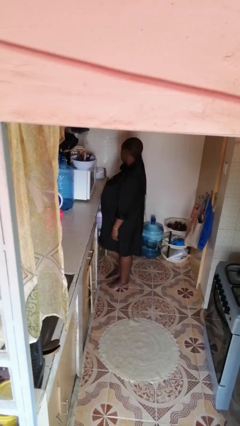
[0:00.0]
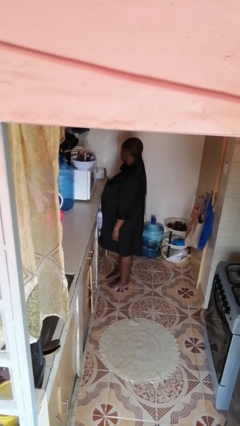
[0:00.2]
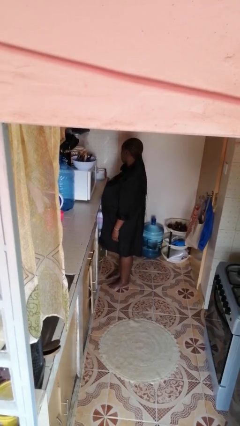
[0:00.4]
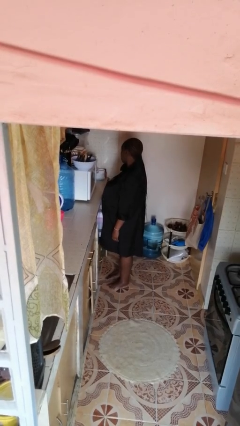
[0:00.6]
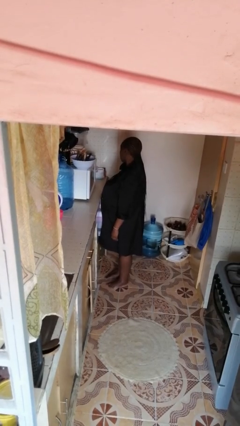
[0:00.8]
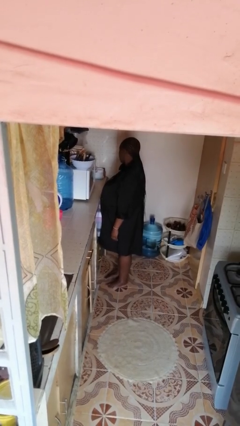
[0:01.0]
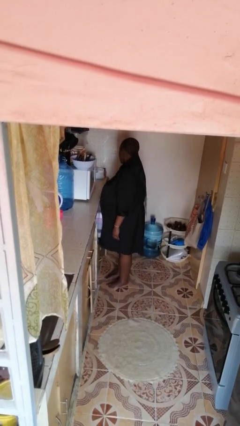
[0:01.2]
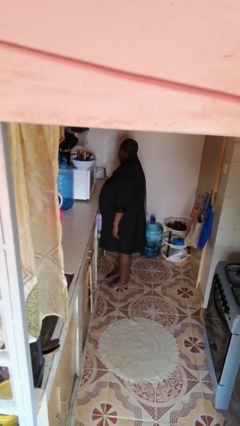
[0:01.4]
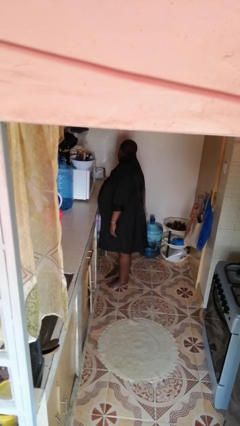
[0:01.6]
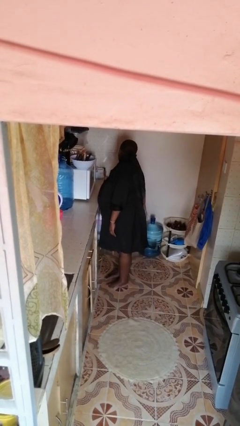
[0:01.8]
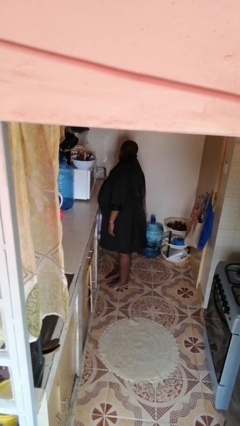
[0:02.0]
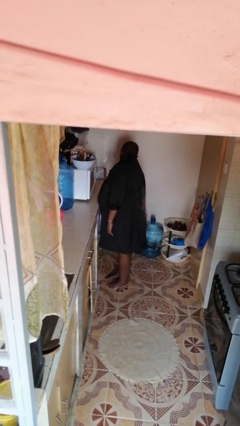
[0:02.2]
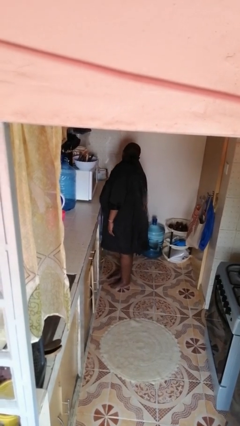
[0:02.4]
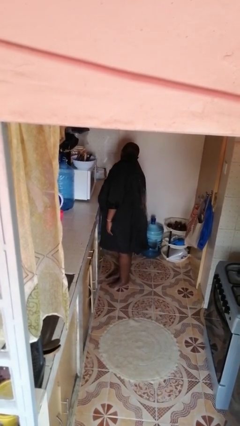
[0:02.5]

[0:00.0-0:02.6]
person opens cabinet

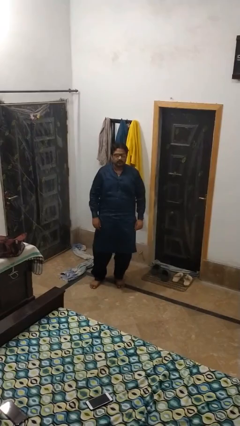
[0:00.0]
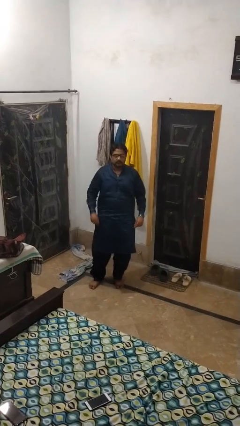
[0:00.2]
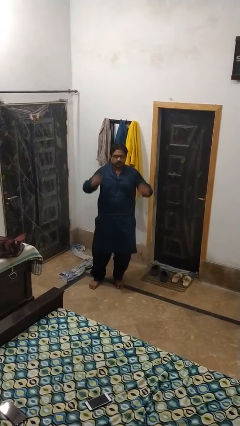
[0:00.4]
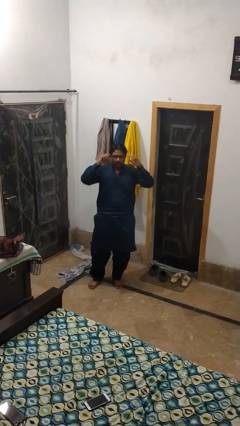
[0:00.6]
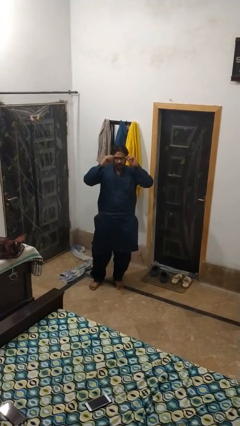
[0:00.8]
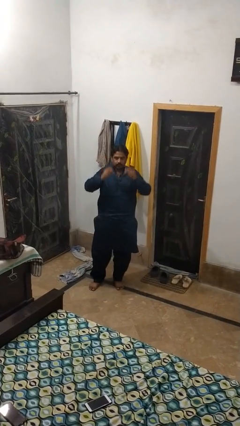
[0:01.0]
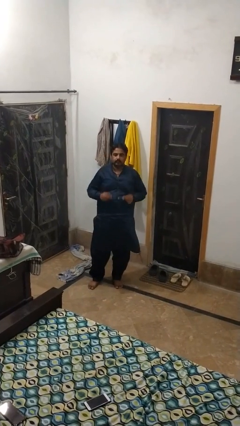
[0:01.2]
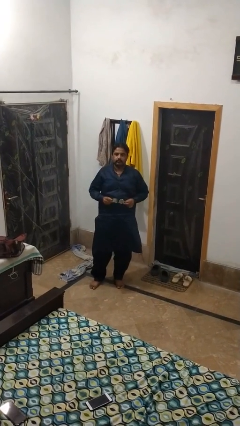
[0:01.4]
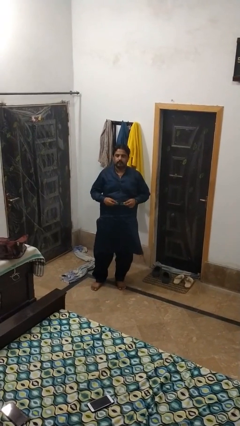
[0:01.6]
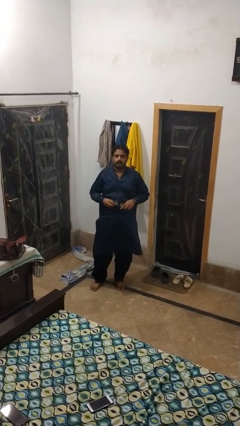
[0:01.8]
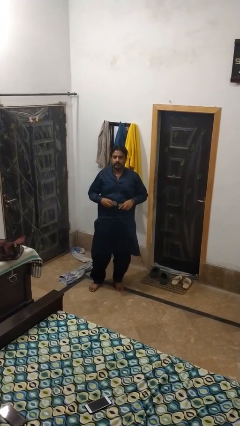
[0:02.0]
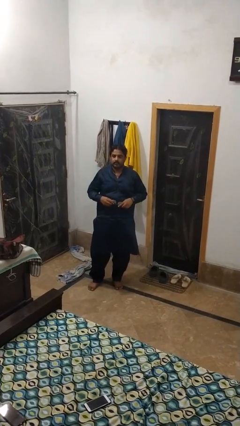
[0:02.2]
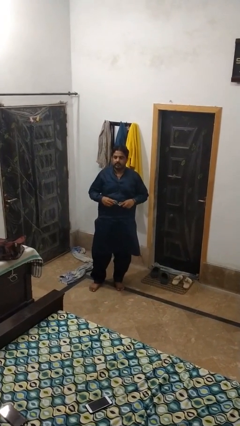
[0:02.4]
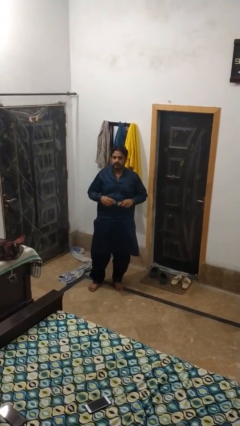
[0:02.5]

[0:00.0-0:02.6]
person takes off glasses

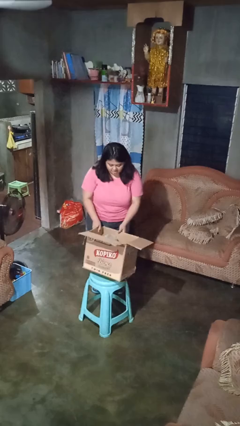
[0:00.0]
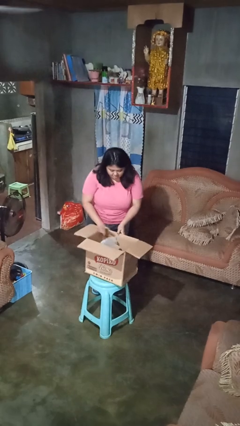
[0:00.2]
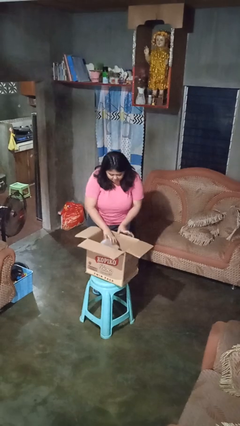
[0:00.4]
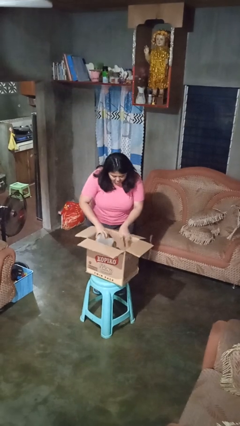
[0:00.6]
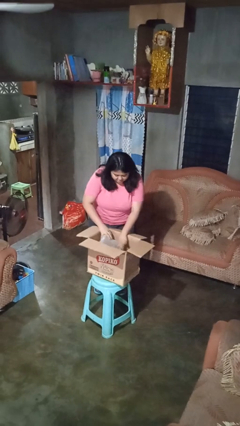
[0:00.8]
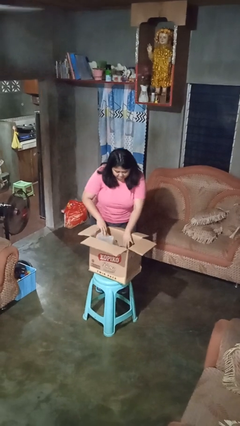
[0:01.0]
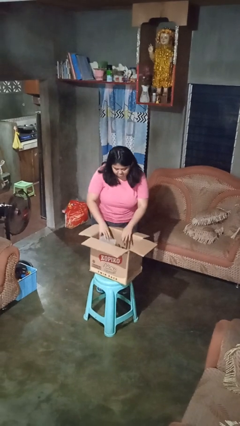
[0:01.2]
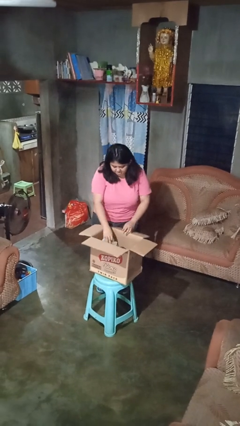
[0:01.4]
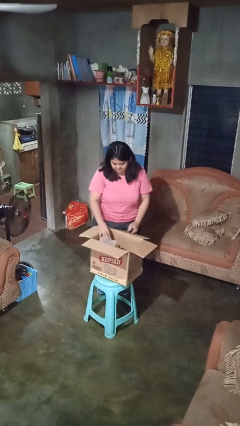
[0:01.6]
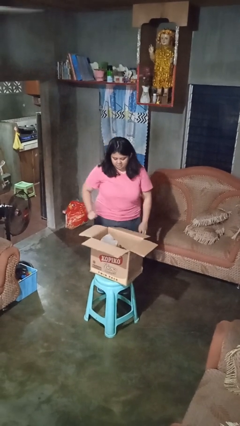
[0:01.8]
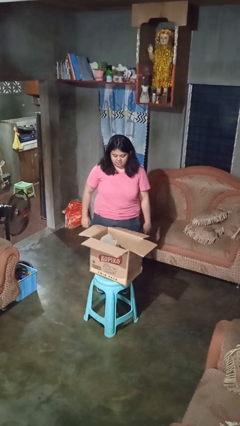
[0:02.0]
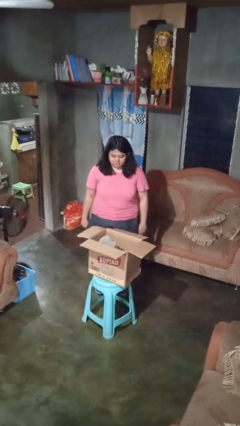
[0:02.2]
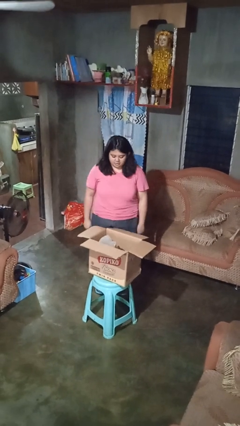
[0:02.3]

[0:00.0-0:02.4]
person searches in box

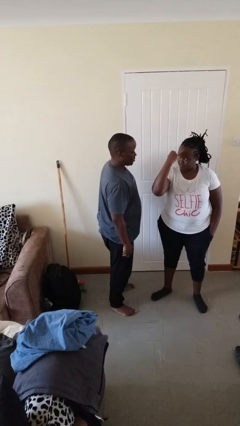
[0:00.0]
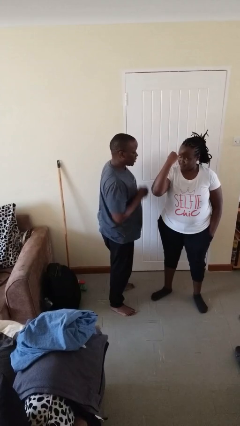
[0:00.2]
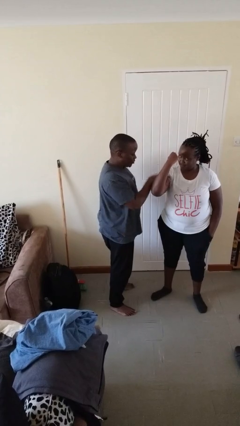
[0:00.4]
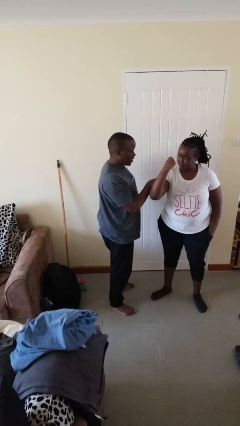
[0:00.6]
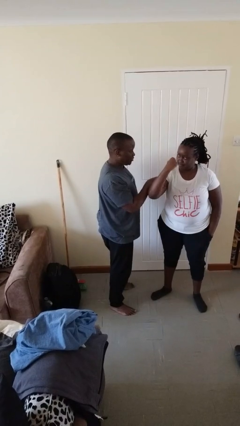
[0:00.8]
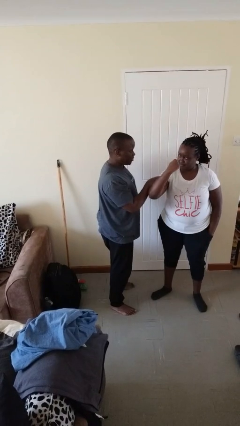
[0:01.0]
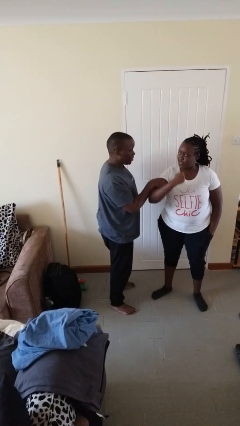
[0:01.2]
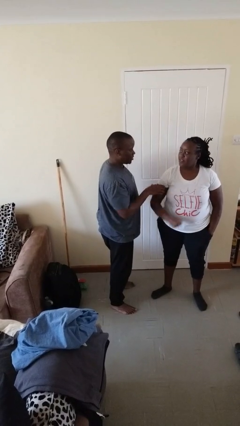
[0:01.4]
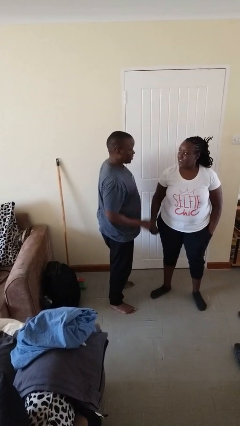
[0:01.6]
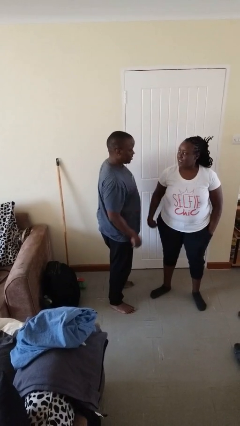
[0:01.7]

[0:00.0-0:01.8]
person grabs person by bicep

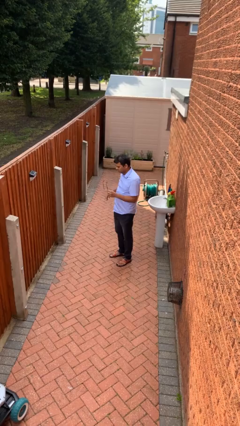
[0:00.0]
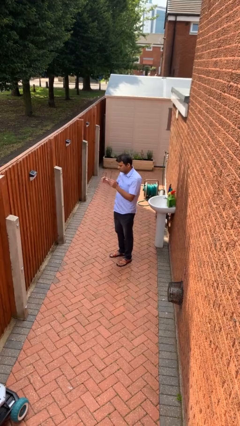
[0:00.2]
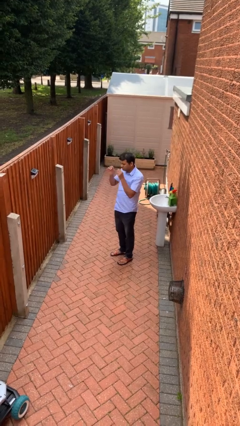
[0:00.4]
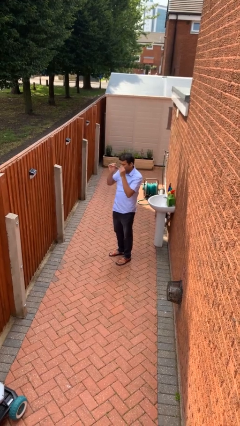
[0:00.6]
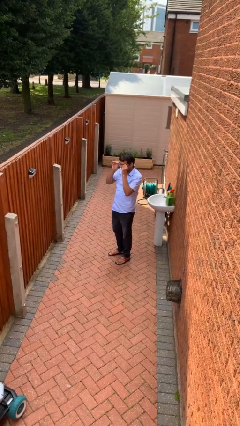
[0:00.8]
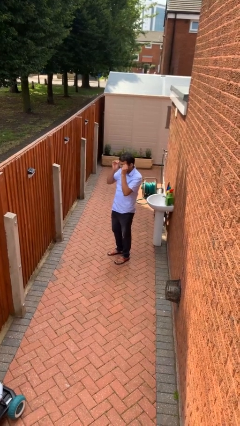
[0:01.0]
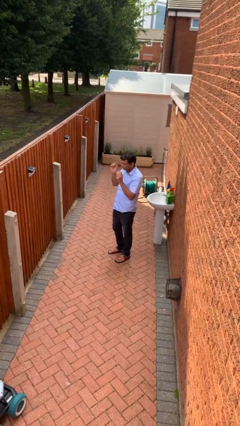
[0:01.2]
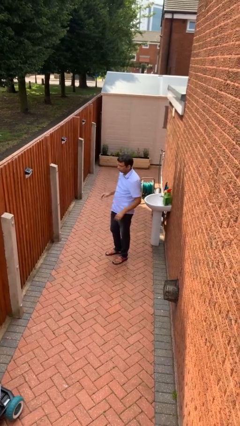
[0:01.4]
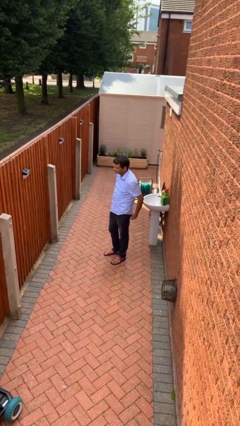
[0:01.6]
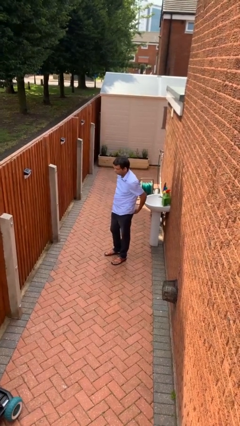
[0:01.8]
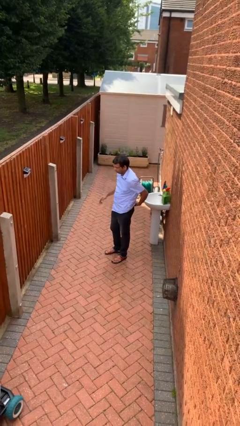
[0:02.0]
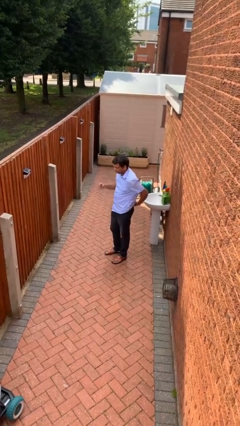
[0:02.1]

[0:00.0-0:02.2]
person puts on glasses

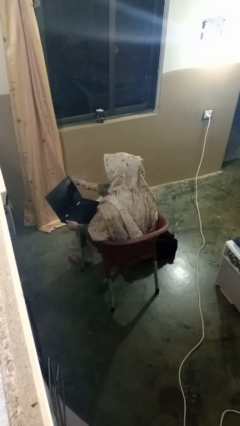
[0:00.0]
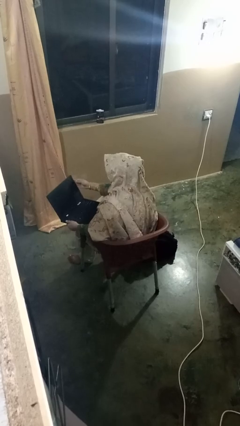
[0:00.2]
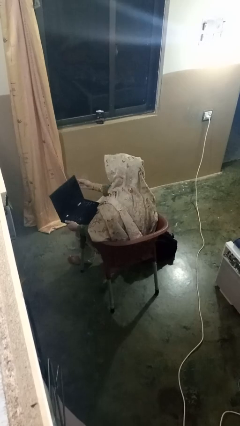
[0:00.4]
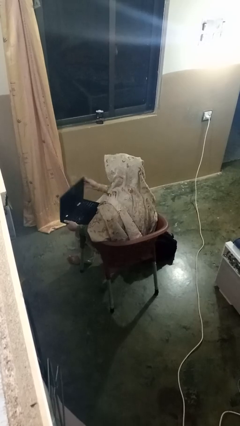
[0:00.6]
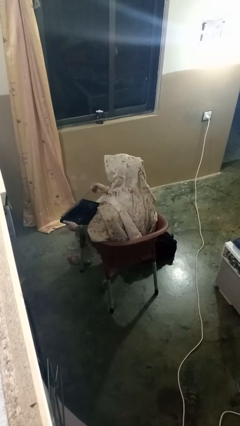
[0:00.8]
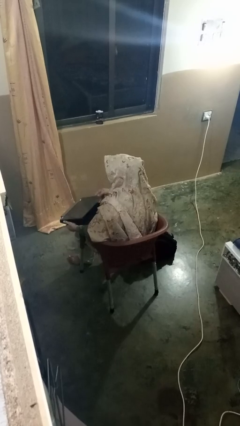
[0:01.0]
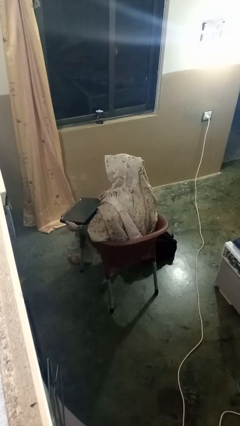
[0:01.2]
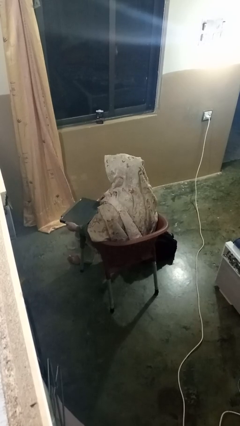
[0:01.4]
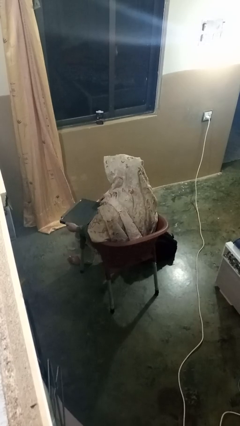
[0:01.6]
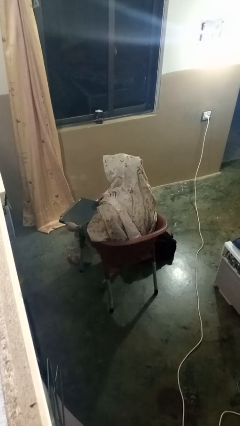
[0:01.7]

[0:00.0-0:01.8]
person closes laptop

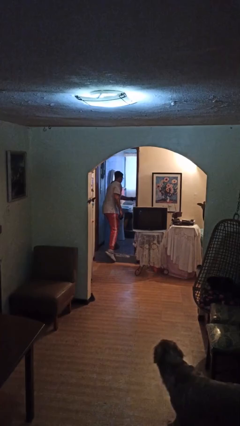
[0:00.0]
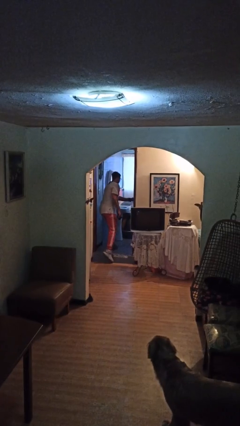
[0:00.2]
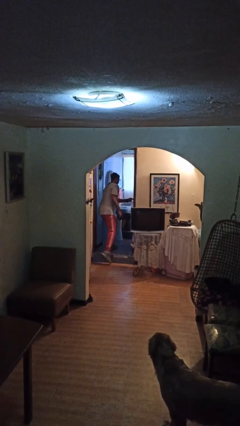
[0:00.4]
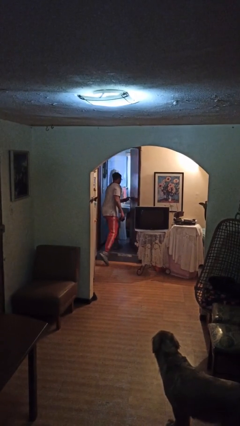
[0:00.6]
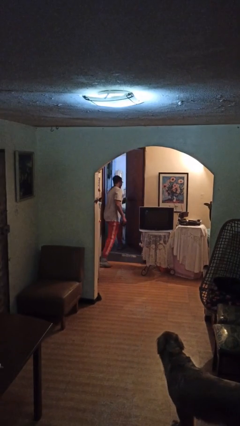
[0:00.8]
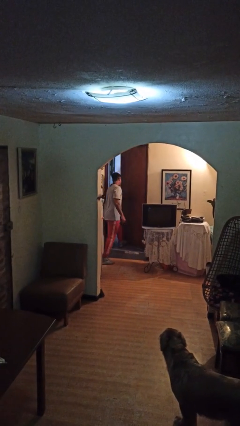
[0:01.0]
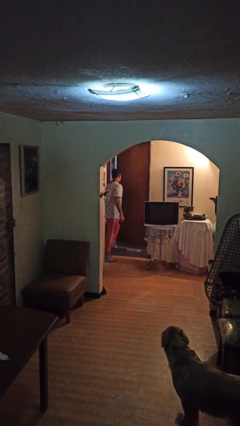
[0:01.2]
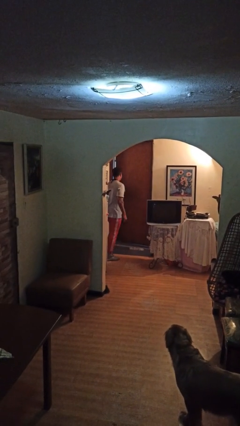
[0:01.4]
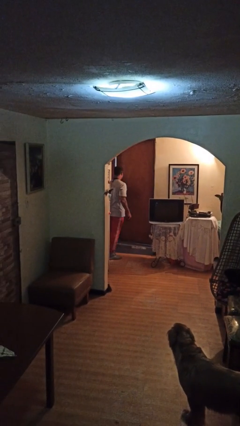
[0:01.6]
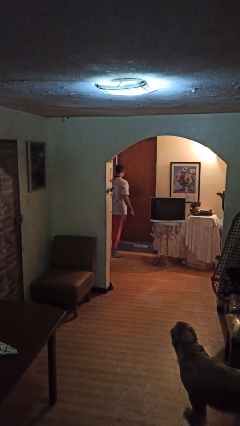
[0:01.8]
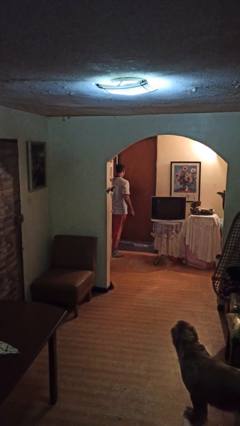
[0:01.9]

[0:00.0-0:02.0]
person closes facility door

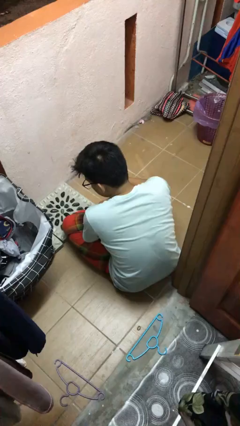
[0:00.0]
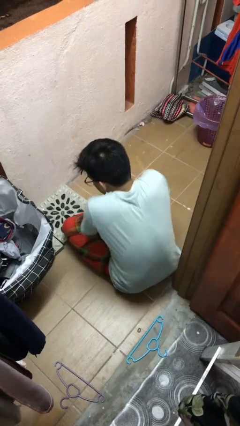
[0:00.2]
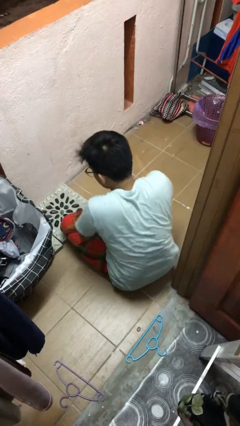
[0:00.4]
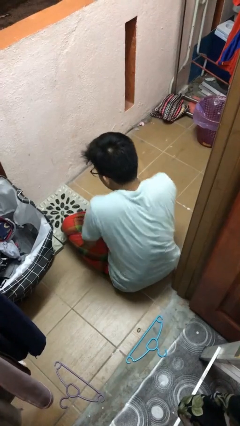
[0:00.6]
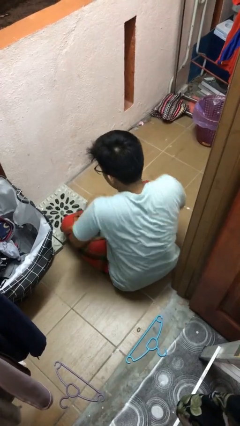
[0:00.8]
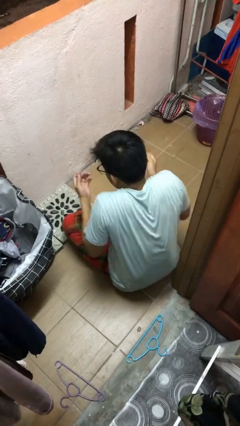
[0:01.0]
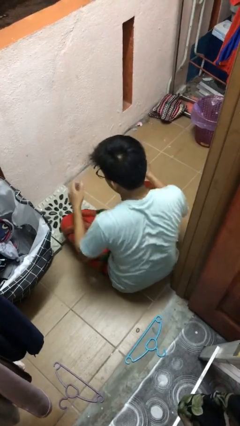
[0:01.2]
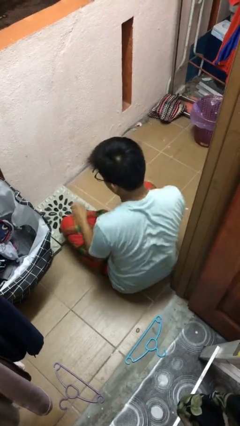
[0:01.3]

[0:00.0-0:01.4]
person shrugs
